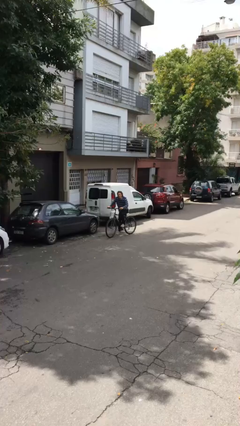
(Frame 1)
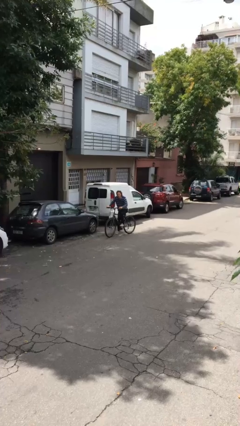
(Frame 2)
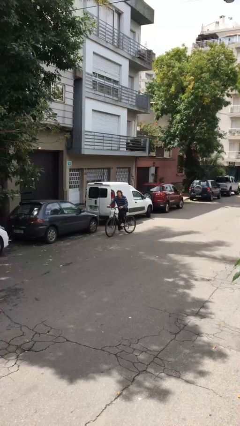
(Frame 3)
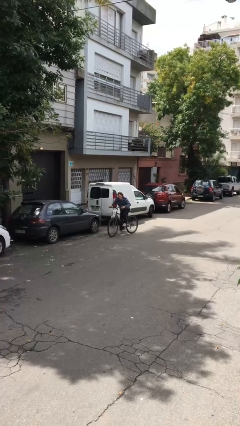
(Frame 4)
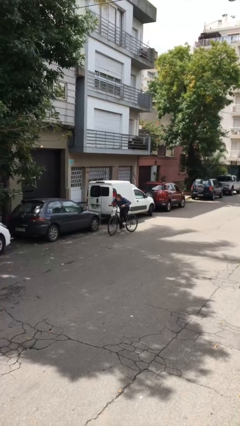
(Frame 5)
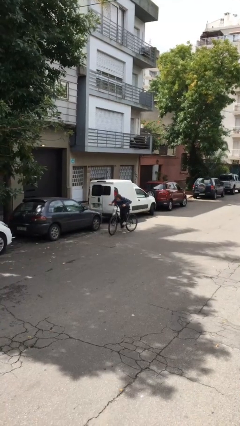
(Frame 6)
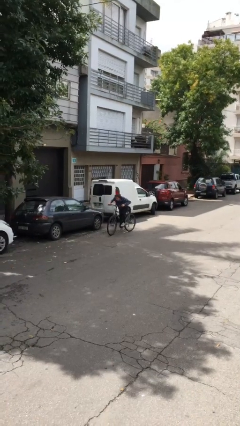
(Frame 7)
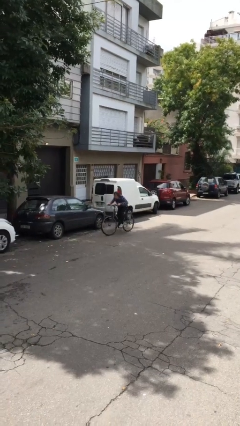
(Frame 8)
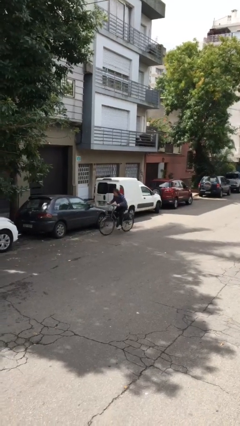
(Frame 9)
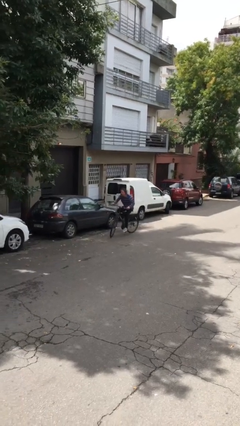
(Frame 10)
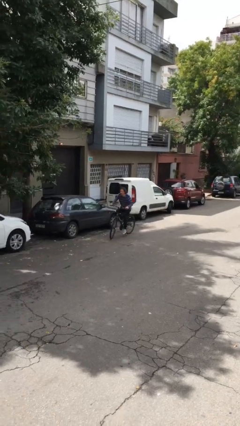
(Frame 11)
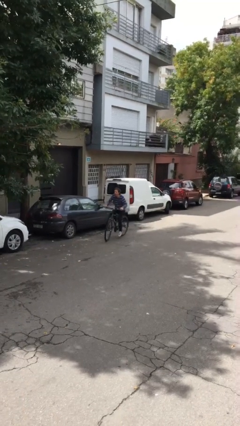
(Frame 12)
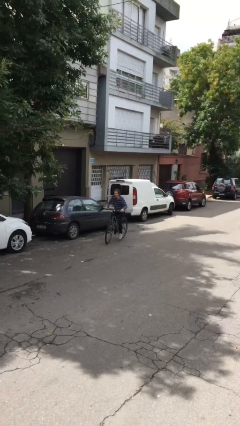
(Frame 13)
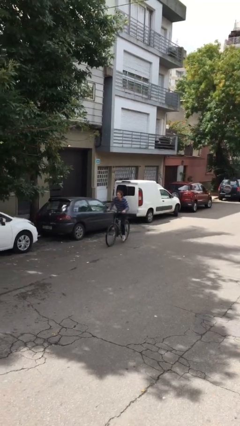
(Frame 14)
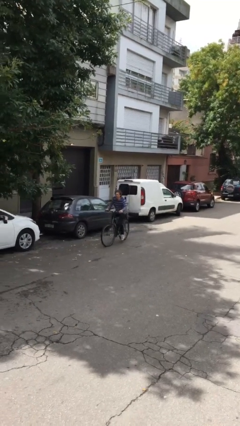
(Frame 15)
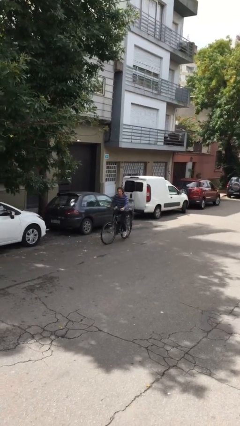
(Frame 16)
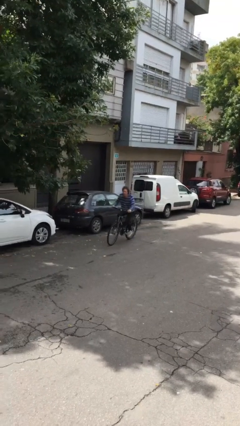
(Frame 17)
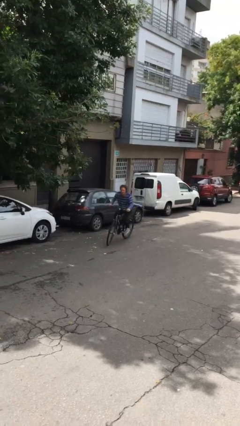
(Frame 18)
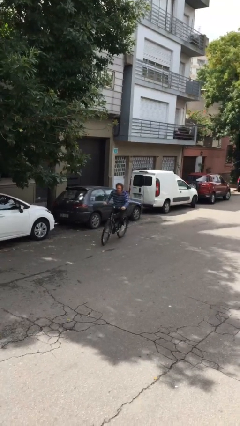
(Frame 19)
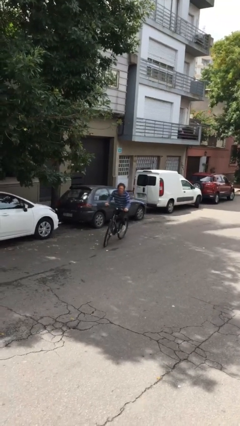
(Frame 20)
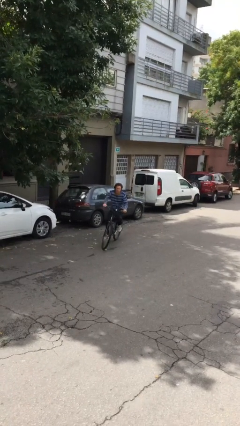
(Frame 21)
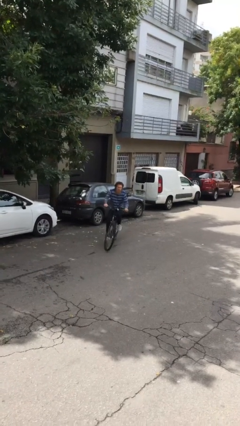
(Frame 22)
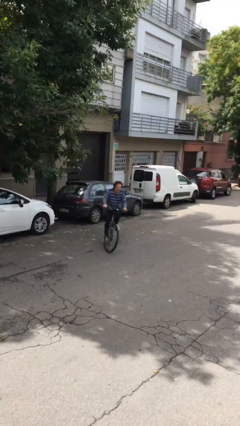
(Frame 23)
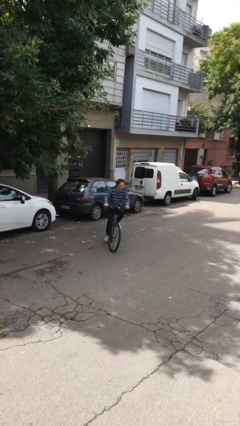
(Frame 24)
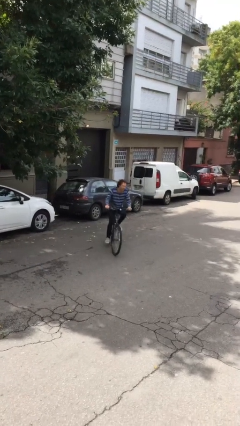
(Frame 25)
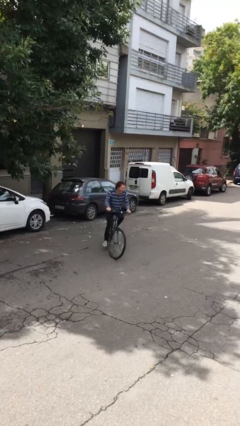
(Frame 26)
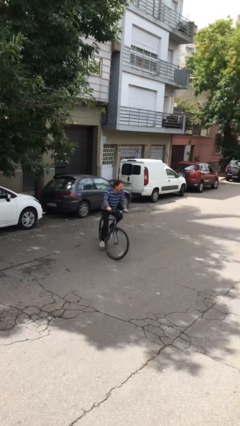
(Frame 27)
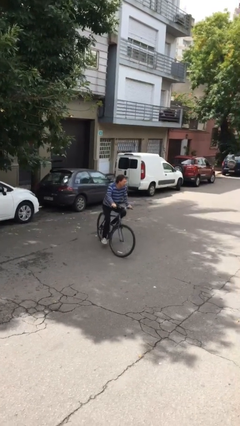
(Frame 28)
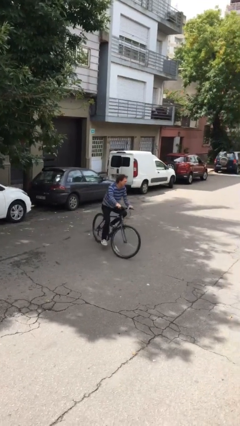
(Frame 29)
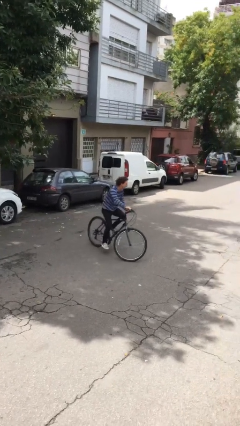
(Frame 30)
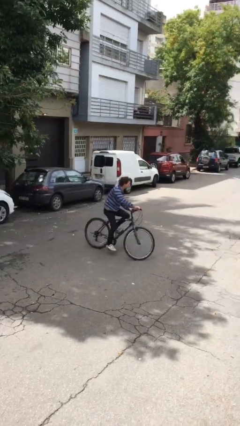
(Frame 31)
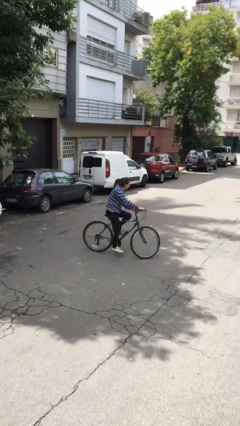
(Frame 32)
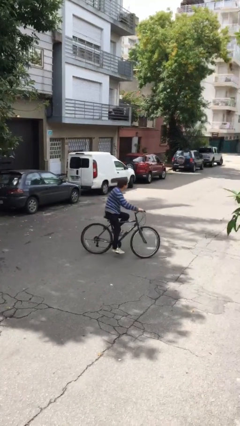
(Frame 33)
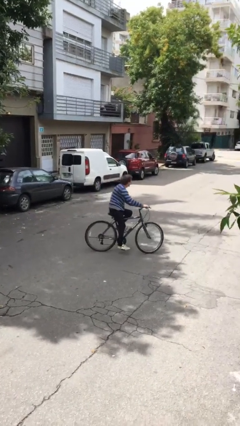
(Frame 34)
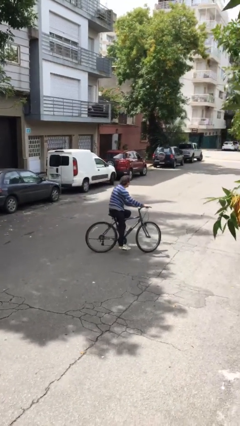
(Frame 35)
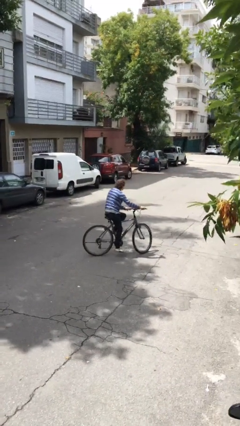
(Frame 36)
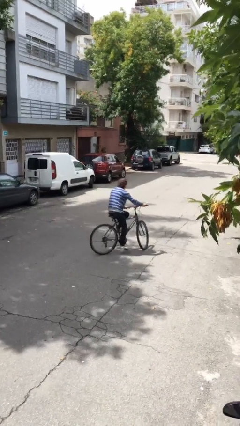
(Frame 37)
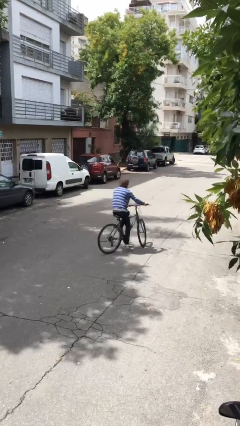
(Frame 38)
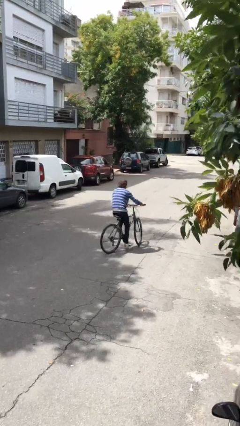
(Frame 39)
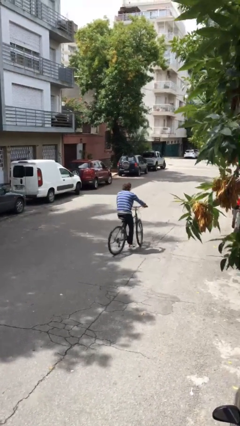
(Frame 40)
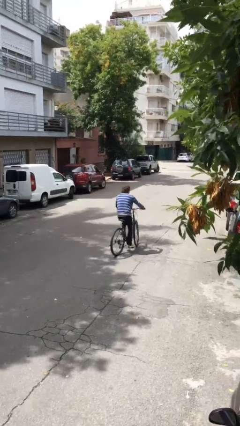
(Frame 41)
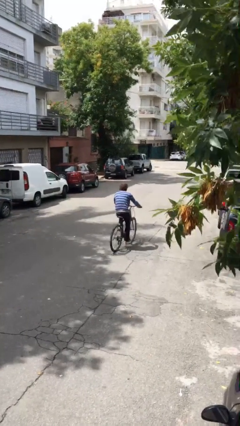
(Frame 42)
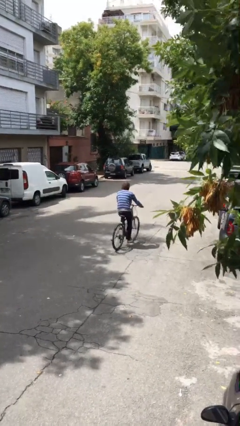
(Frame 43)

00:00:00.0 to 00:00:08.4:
person rides bicycle

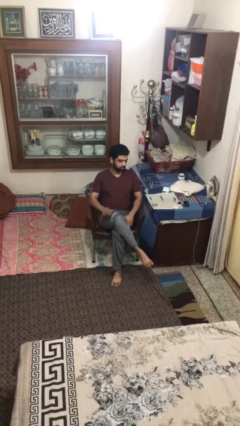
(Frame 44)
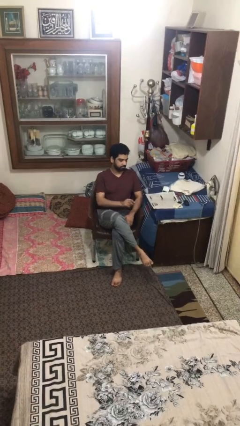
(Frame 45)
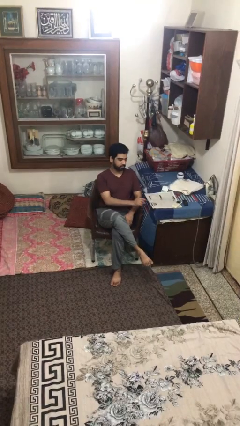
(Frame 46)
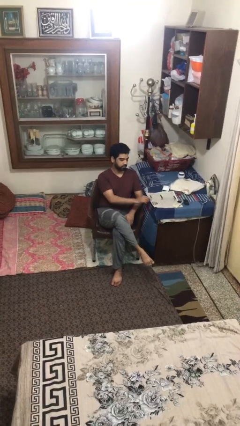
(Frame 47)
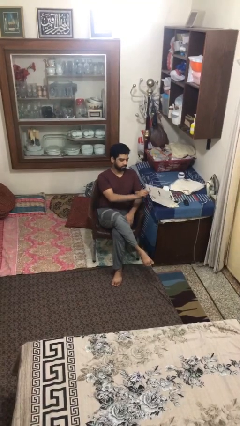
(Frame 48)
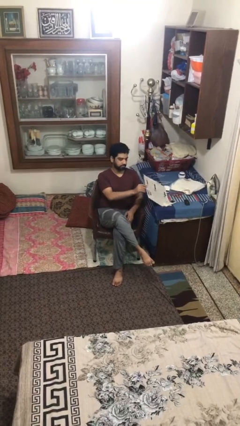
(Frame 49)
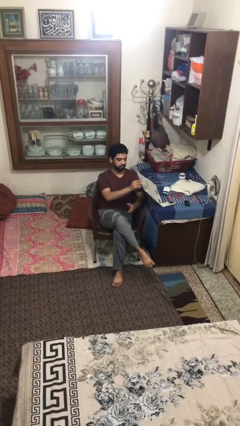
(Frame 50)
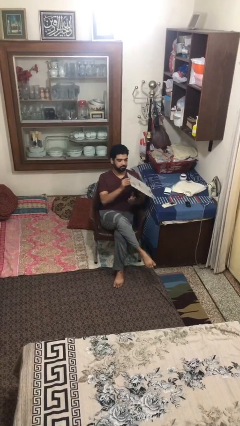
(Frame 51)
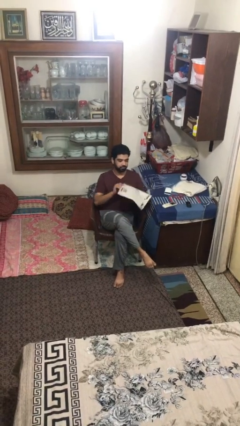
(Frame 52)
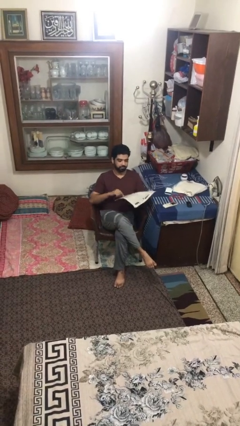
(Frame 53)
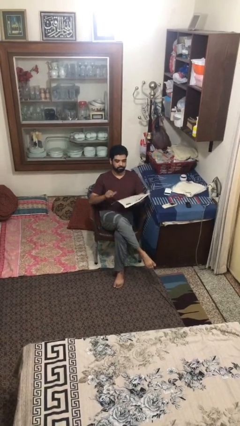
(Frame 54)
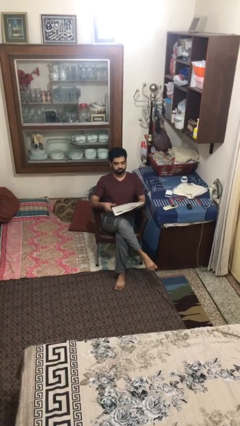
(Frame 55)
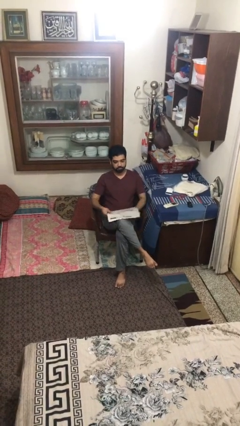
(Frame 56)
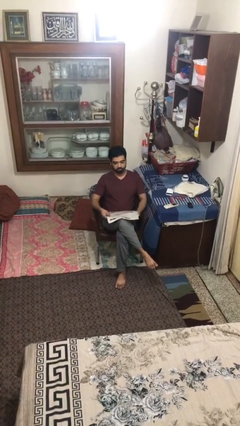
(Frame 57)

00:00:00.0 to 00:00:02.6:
person picks up object from table

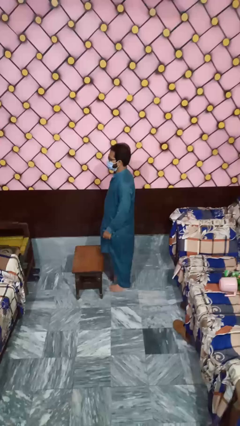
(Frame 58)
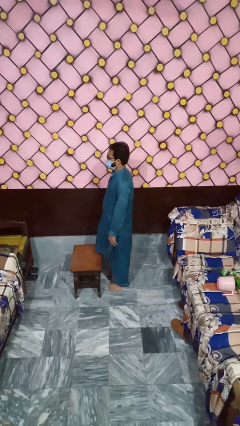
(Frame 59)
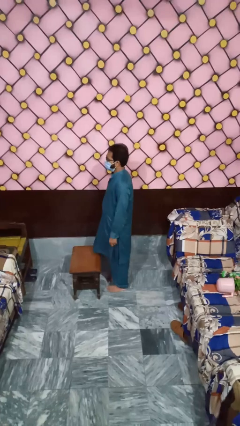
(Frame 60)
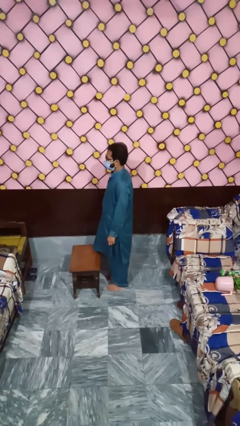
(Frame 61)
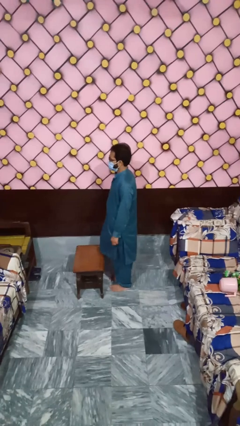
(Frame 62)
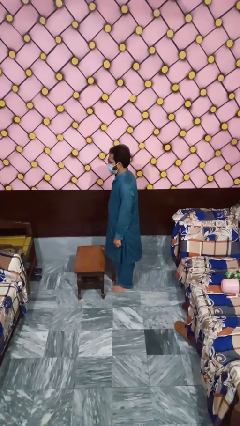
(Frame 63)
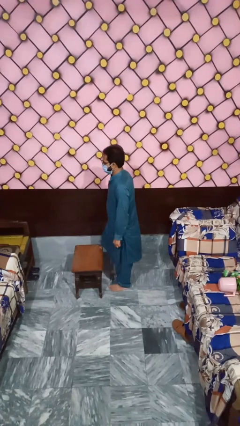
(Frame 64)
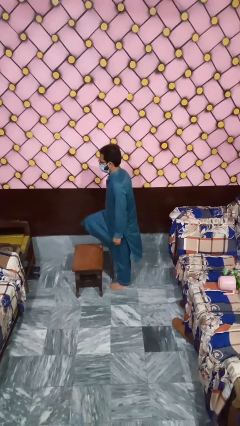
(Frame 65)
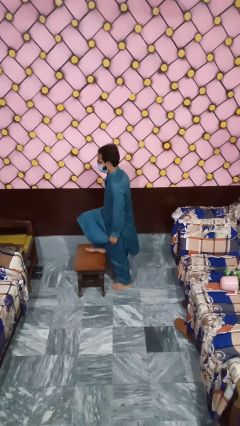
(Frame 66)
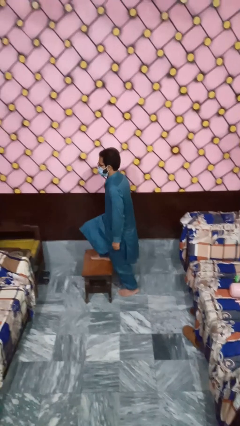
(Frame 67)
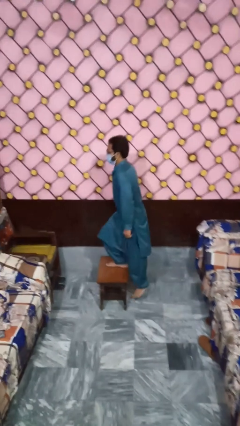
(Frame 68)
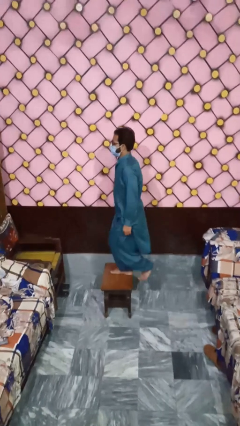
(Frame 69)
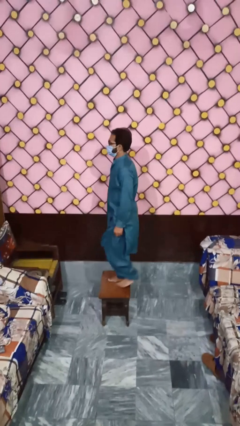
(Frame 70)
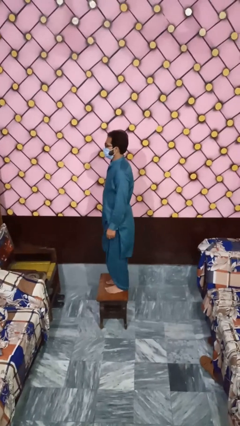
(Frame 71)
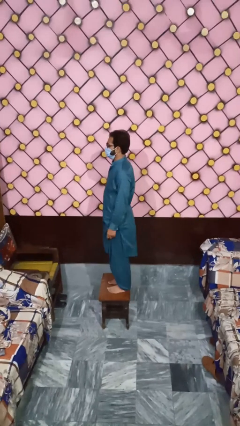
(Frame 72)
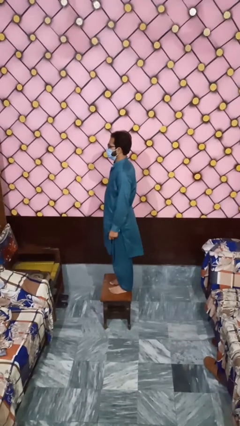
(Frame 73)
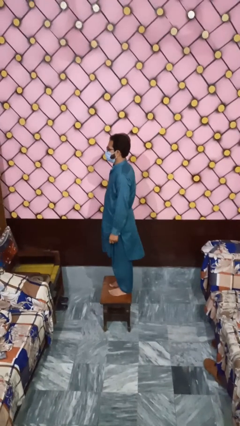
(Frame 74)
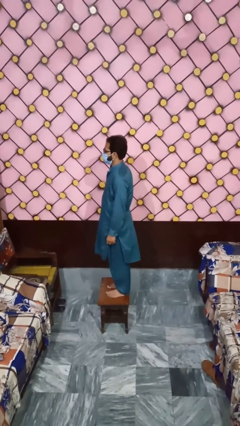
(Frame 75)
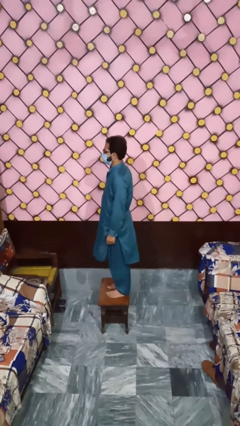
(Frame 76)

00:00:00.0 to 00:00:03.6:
person climbs on table

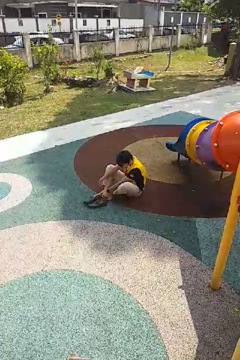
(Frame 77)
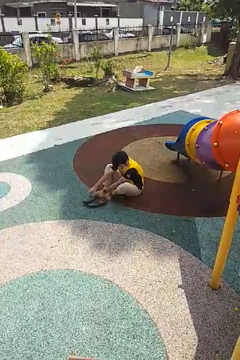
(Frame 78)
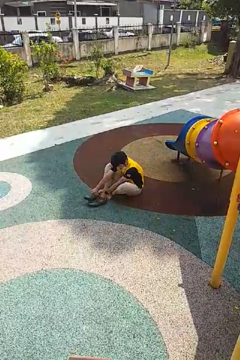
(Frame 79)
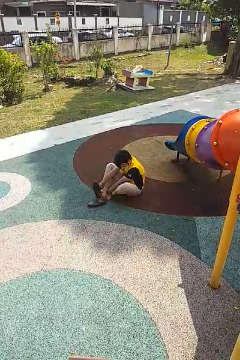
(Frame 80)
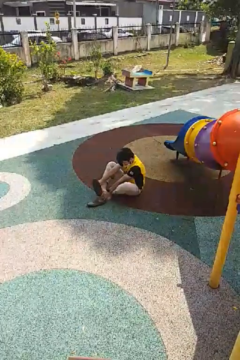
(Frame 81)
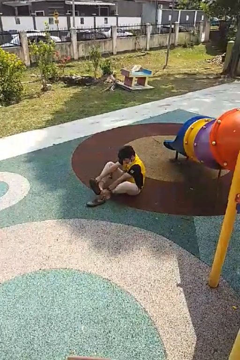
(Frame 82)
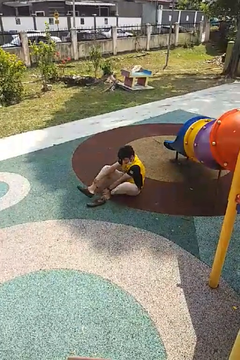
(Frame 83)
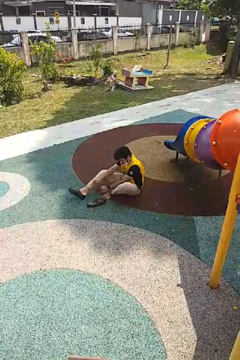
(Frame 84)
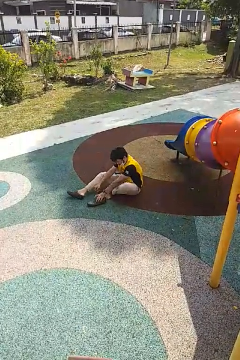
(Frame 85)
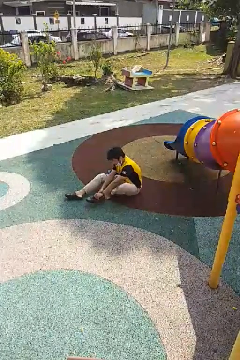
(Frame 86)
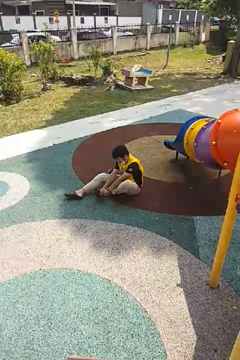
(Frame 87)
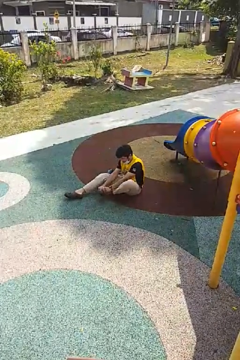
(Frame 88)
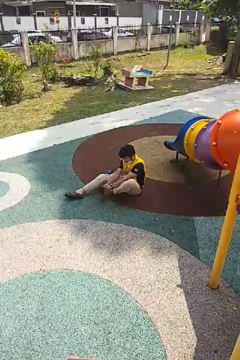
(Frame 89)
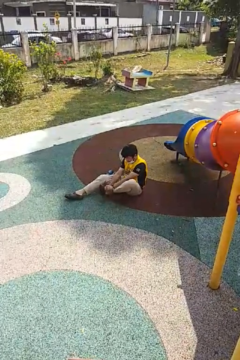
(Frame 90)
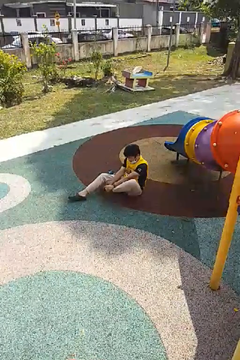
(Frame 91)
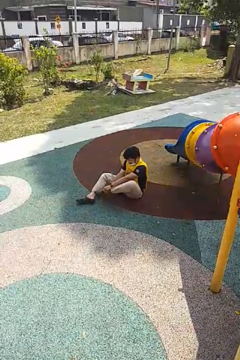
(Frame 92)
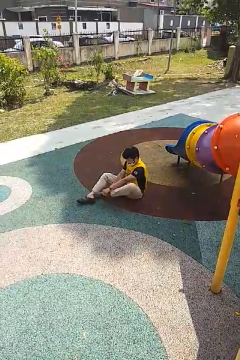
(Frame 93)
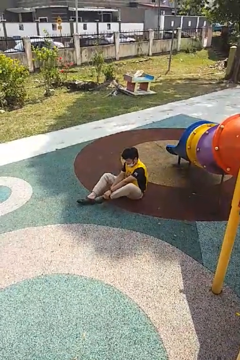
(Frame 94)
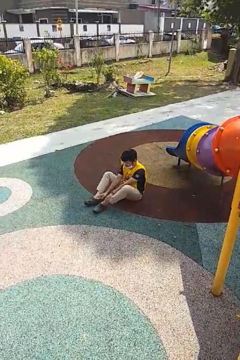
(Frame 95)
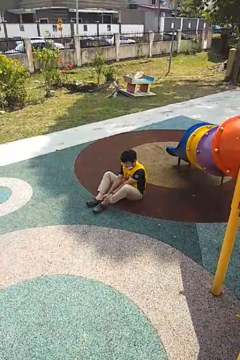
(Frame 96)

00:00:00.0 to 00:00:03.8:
person puts on shoes
